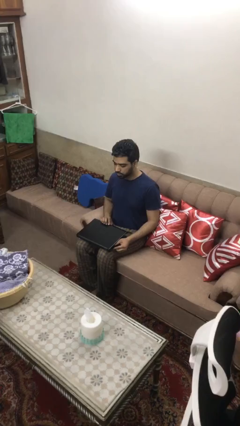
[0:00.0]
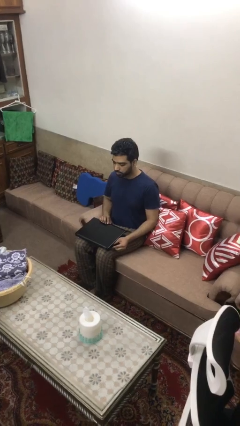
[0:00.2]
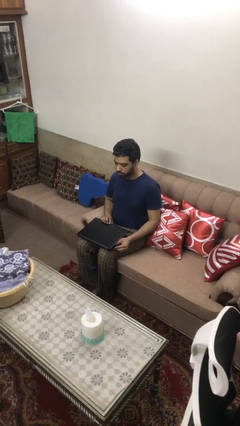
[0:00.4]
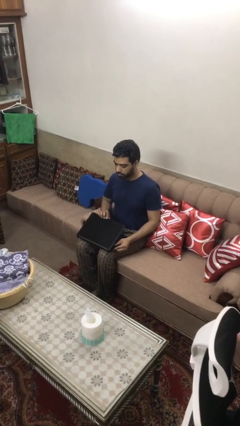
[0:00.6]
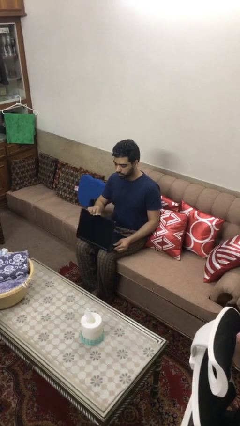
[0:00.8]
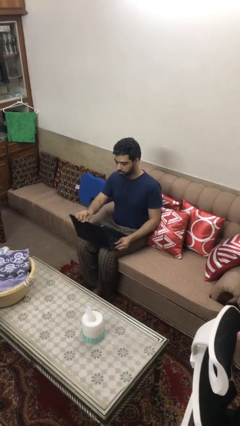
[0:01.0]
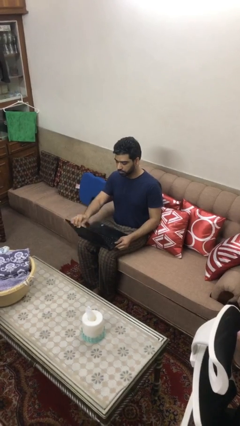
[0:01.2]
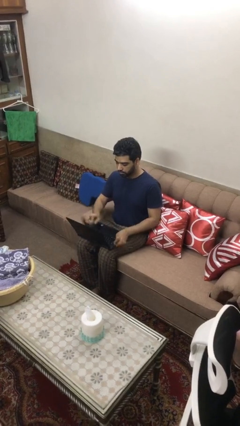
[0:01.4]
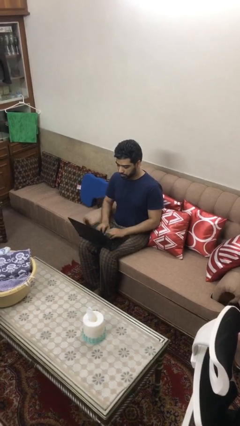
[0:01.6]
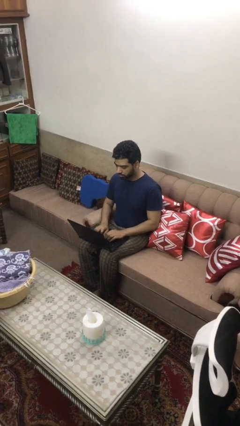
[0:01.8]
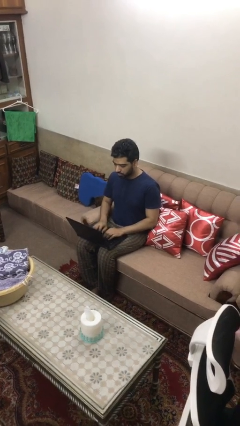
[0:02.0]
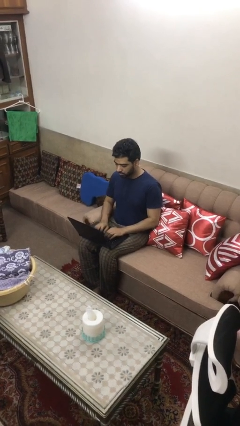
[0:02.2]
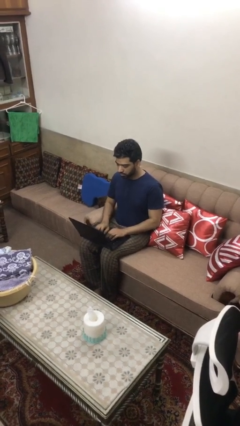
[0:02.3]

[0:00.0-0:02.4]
person interacts with laptop

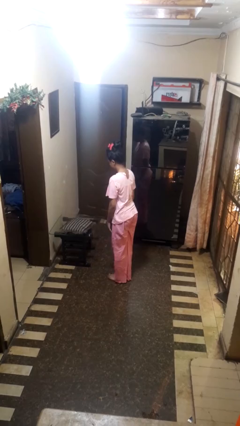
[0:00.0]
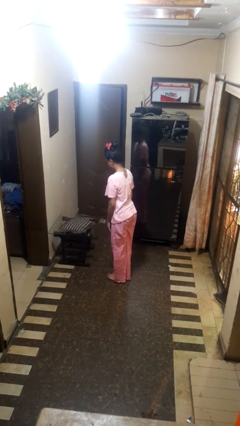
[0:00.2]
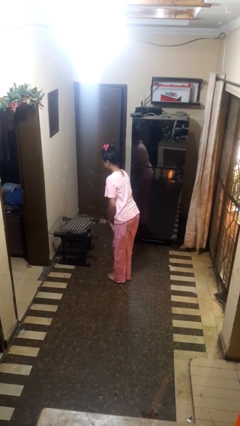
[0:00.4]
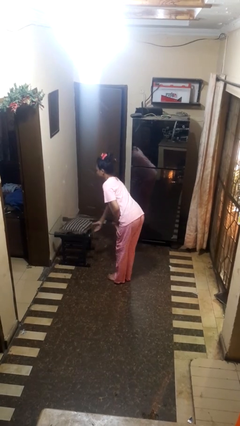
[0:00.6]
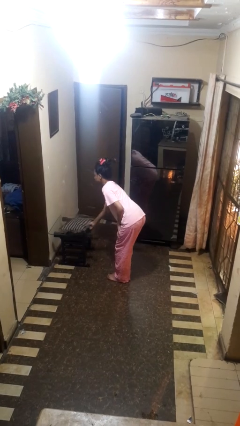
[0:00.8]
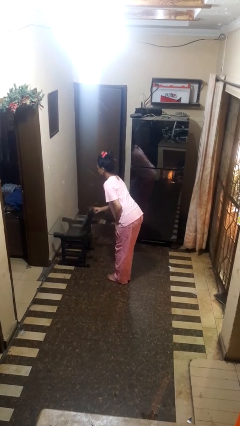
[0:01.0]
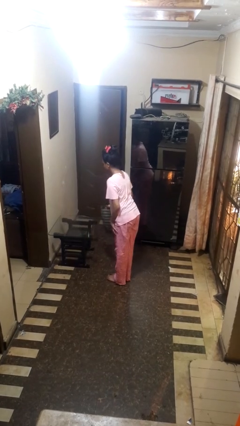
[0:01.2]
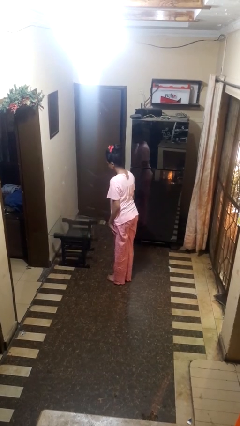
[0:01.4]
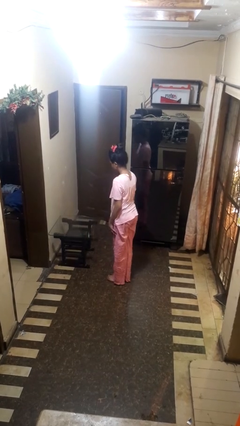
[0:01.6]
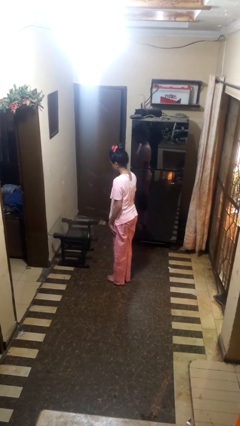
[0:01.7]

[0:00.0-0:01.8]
person picks up object from table

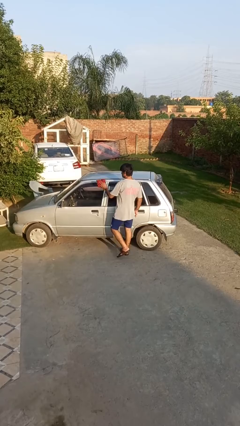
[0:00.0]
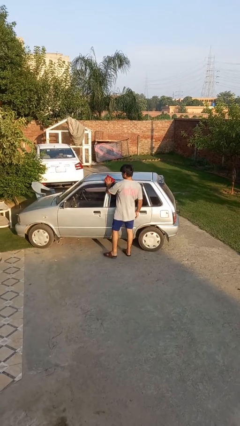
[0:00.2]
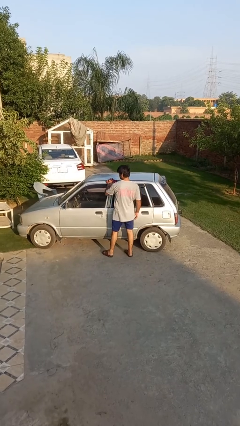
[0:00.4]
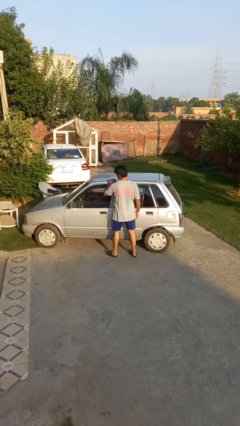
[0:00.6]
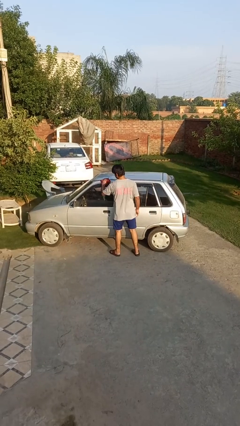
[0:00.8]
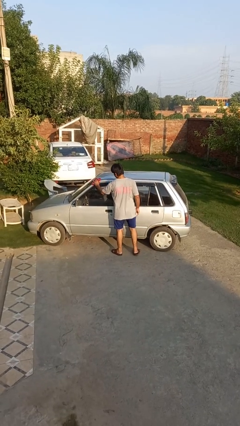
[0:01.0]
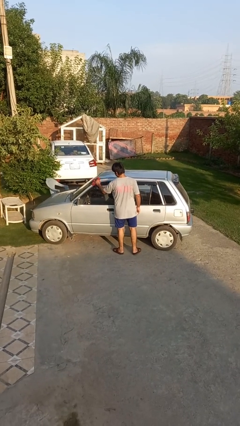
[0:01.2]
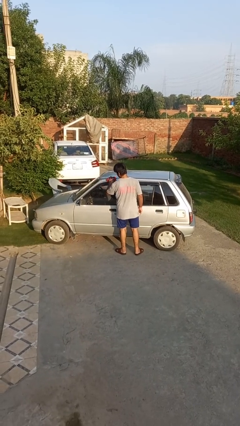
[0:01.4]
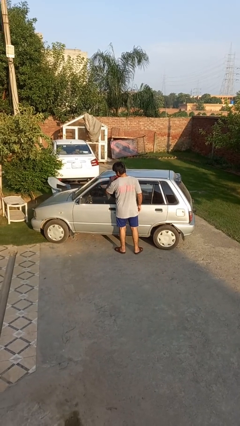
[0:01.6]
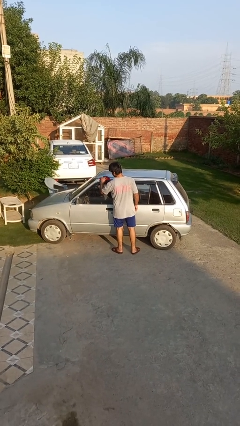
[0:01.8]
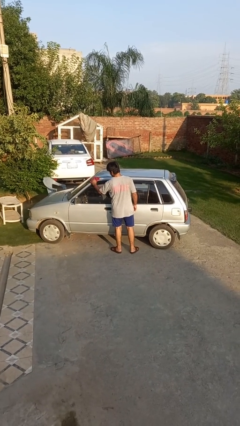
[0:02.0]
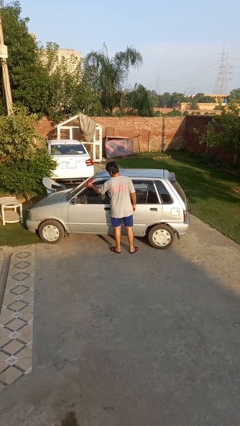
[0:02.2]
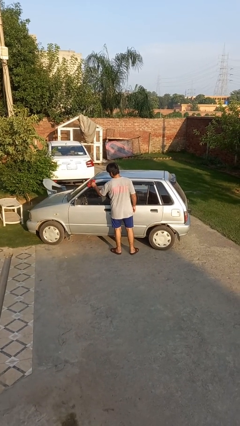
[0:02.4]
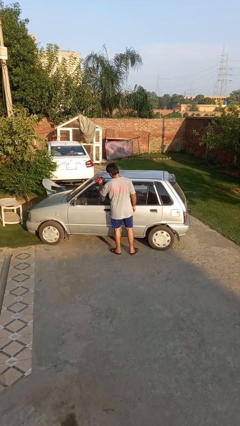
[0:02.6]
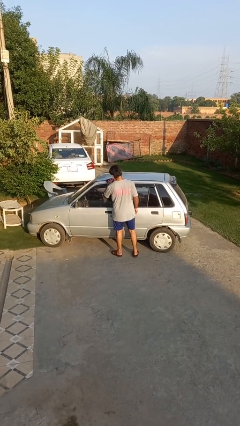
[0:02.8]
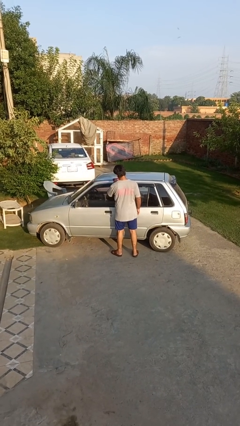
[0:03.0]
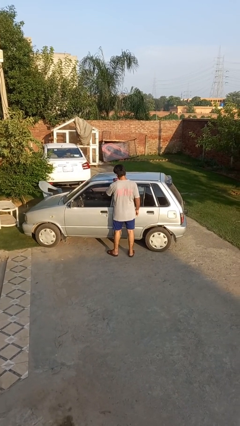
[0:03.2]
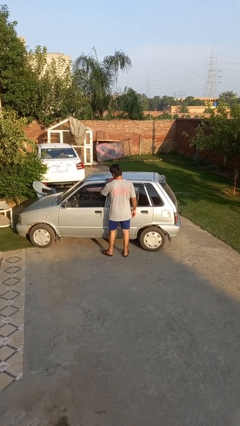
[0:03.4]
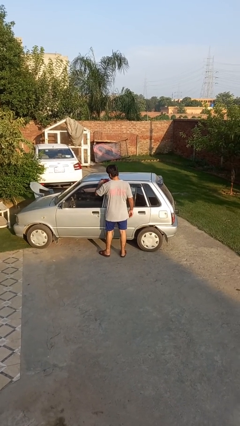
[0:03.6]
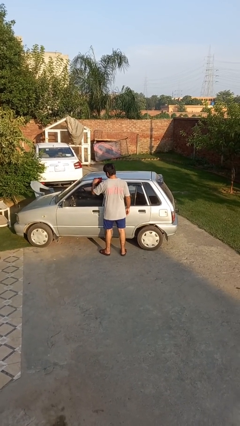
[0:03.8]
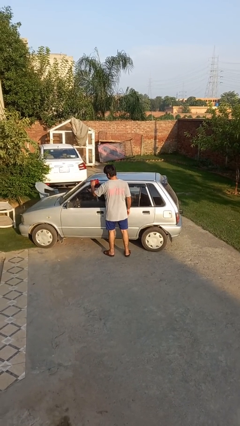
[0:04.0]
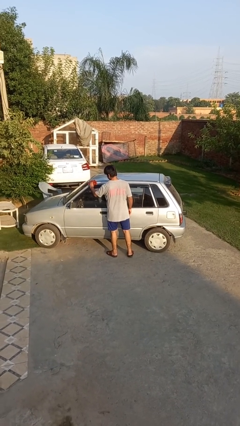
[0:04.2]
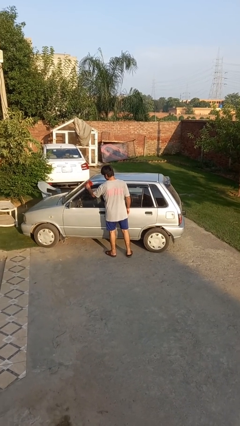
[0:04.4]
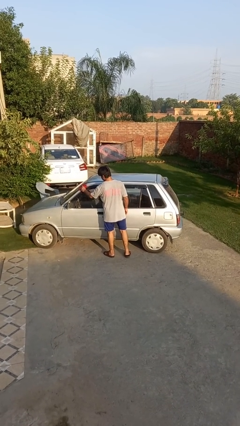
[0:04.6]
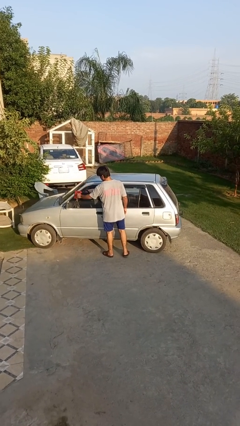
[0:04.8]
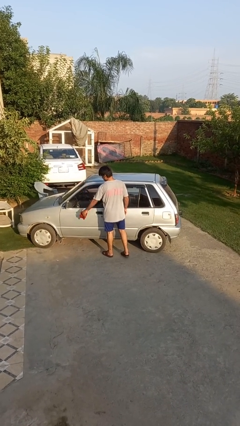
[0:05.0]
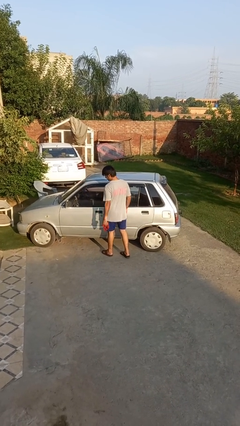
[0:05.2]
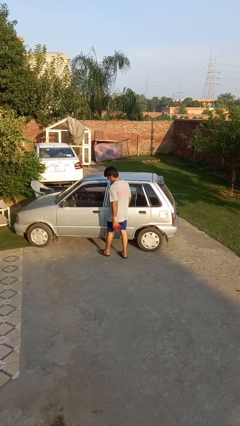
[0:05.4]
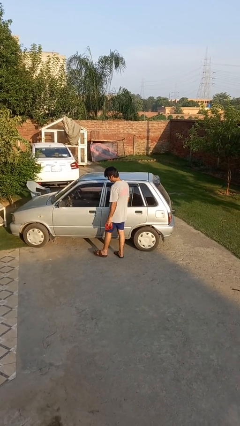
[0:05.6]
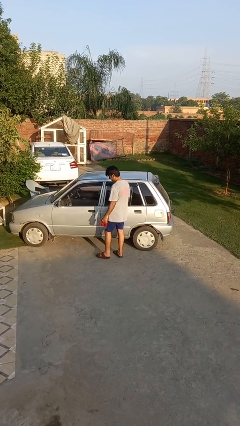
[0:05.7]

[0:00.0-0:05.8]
person polishes car with rag

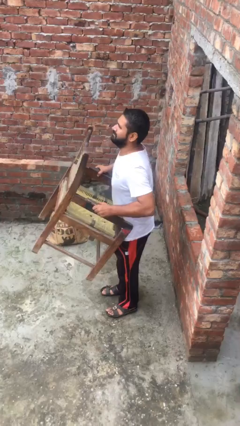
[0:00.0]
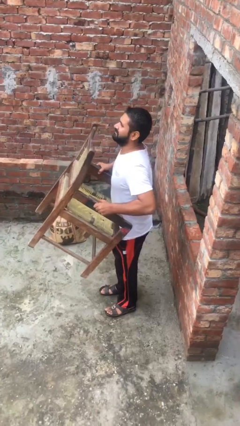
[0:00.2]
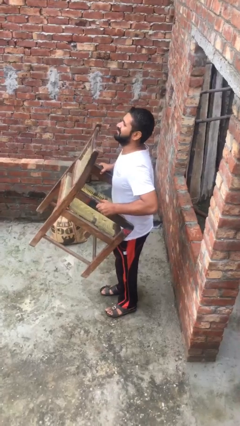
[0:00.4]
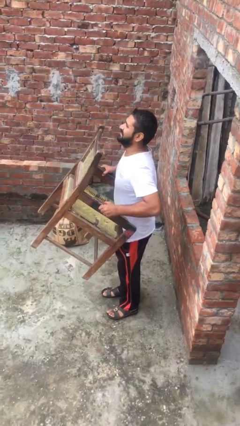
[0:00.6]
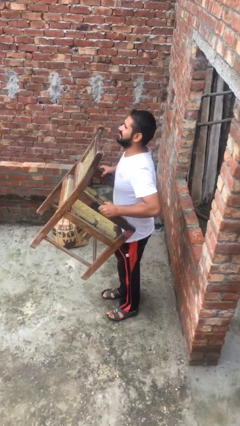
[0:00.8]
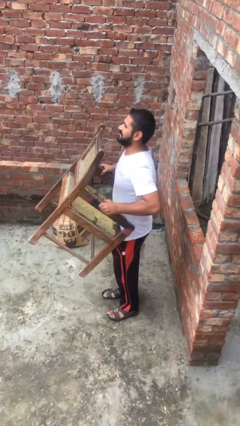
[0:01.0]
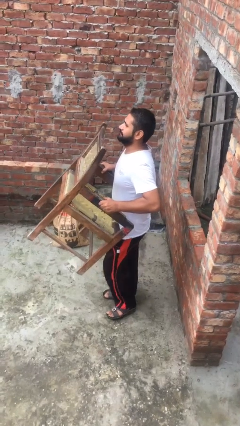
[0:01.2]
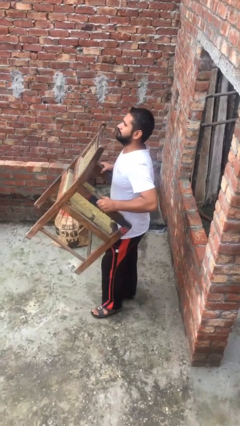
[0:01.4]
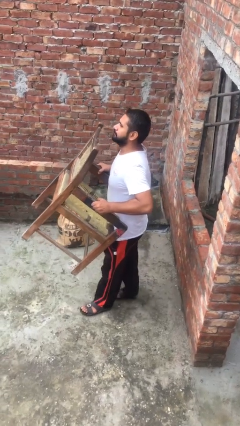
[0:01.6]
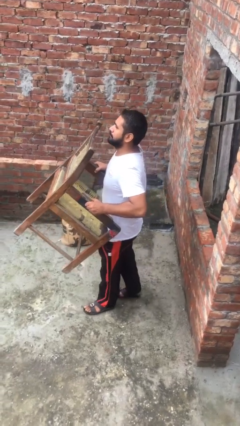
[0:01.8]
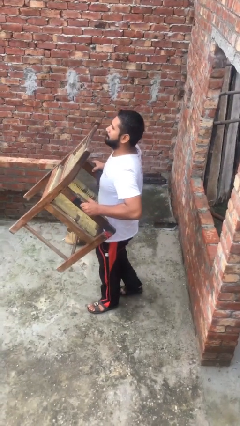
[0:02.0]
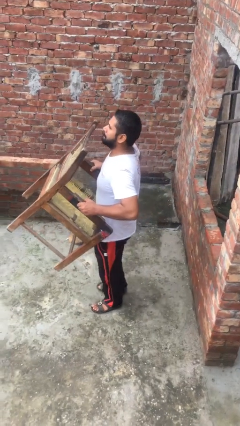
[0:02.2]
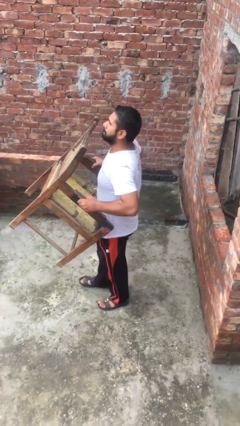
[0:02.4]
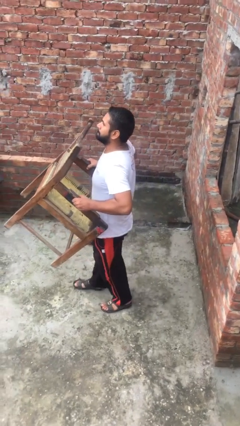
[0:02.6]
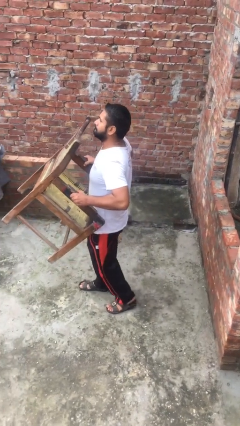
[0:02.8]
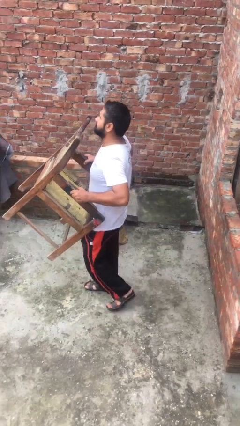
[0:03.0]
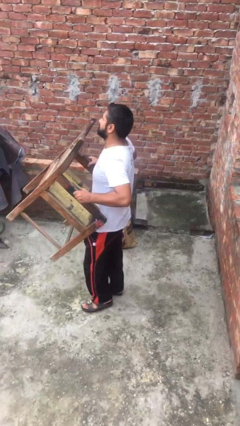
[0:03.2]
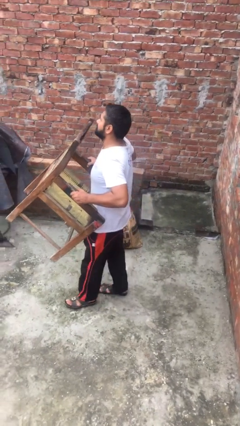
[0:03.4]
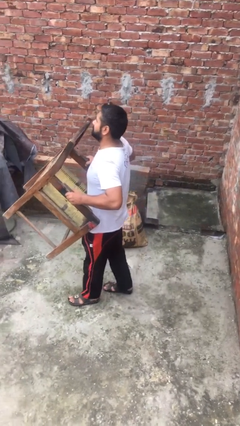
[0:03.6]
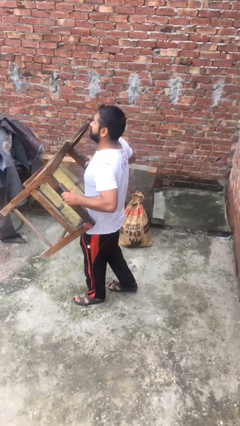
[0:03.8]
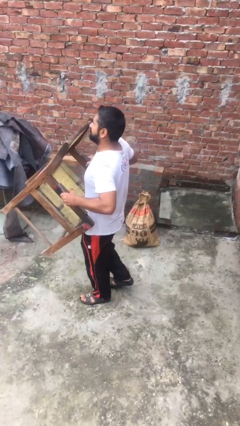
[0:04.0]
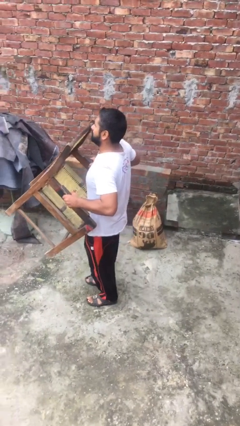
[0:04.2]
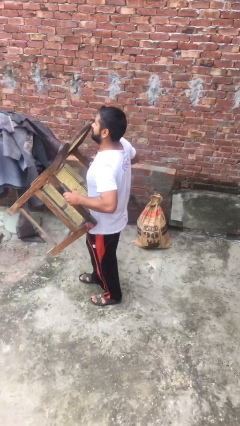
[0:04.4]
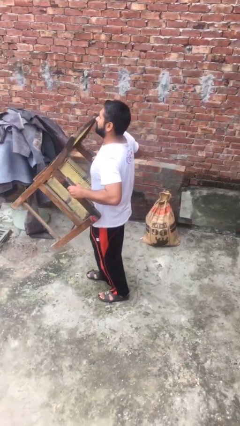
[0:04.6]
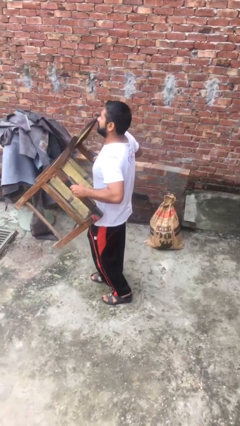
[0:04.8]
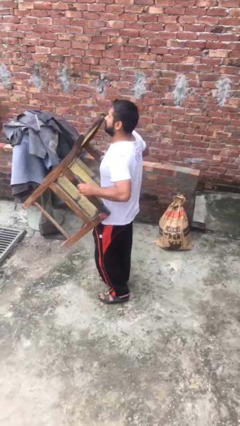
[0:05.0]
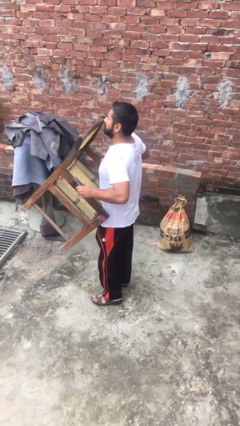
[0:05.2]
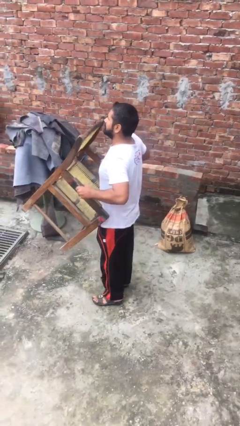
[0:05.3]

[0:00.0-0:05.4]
person carries heavy object

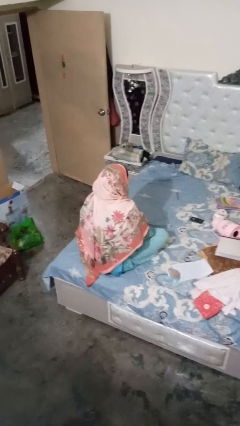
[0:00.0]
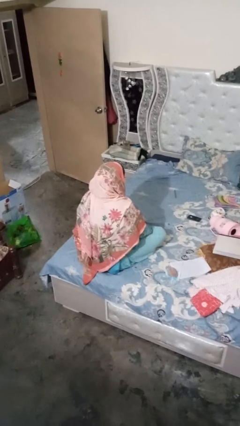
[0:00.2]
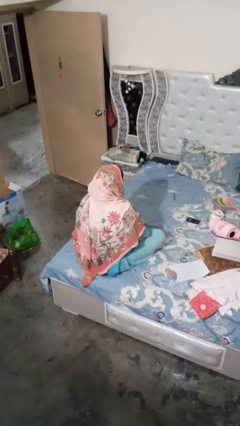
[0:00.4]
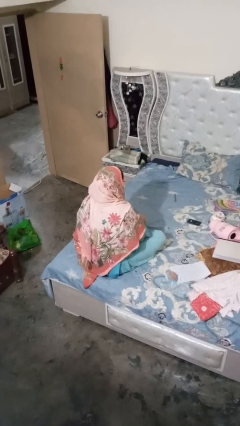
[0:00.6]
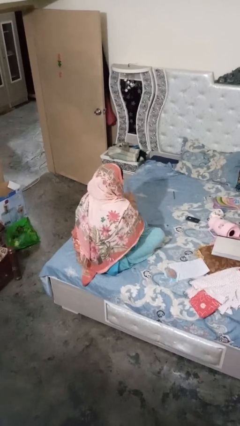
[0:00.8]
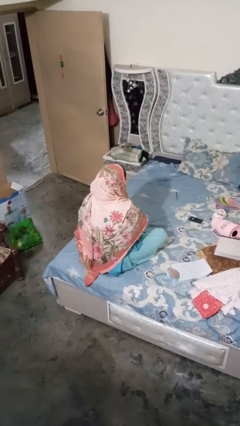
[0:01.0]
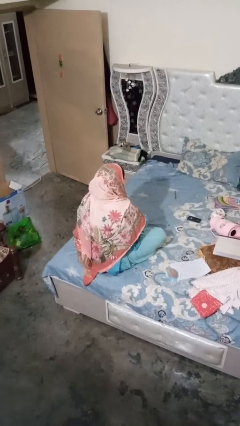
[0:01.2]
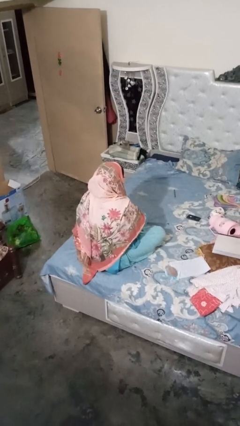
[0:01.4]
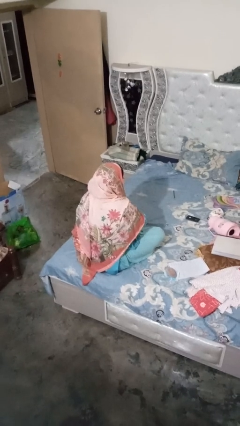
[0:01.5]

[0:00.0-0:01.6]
person gestures be quiet

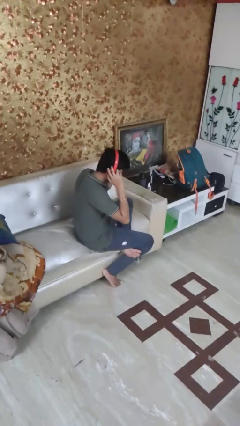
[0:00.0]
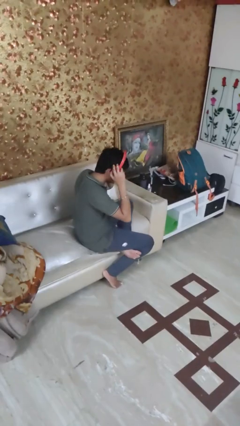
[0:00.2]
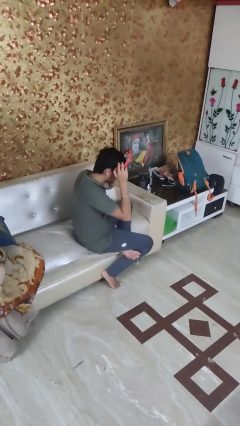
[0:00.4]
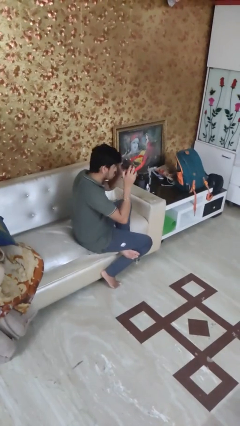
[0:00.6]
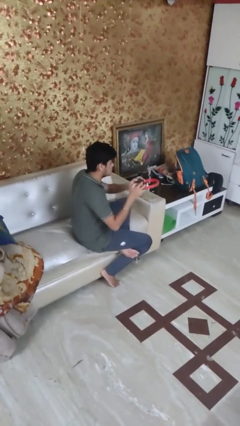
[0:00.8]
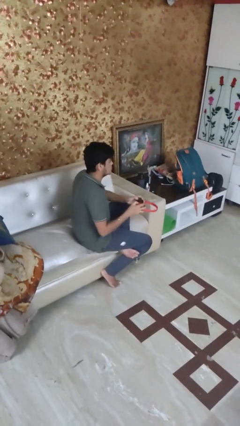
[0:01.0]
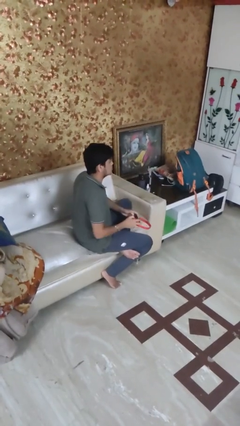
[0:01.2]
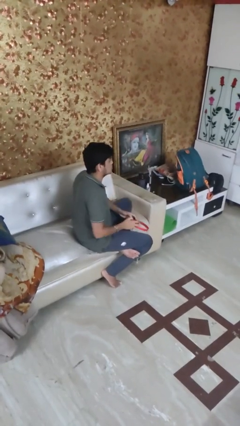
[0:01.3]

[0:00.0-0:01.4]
person takes off headphones
